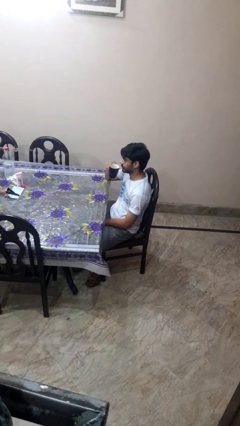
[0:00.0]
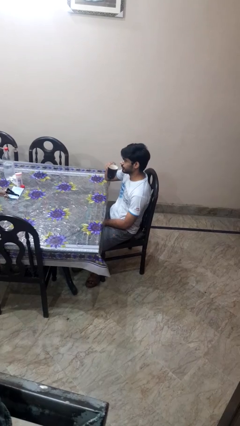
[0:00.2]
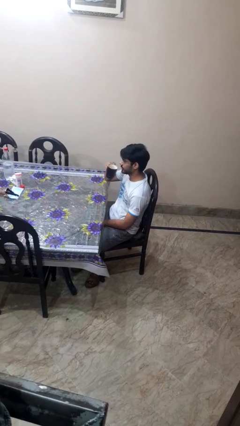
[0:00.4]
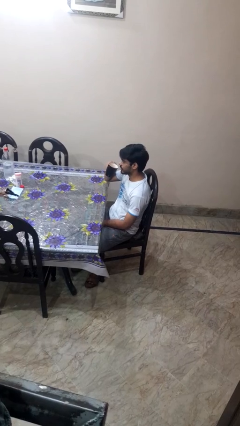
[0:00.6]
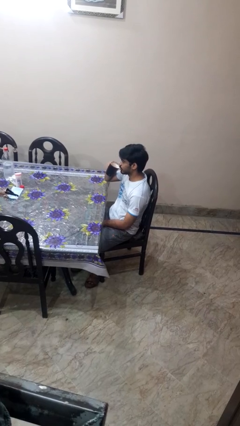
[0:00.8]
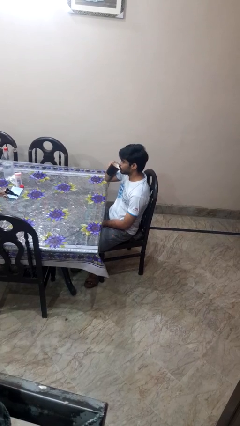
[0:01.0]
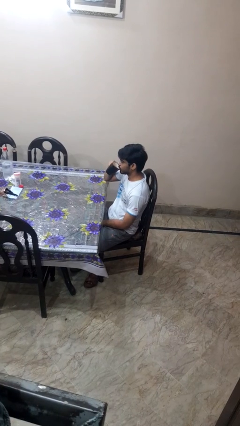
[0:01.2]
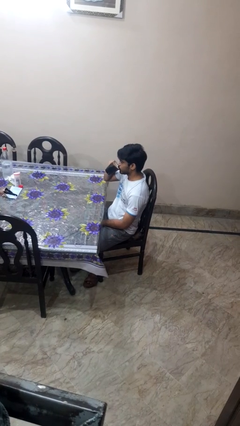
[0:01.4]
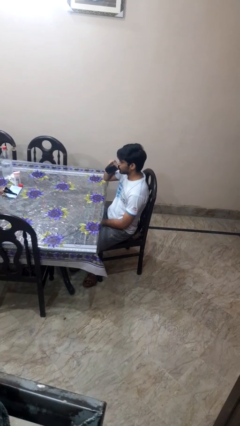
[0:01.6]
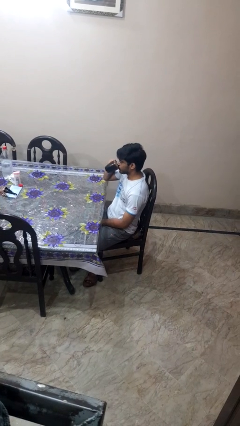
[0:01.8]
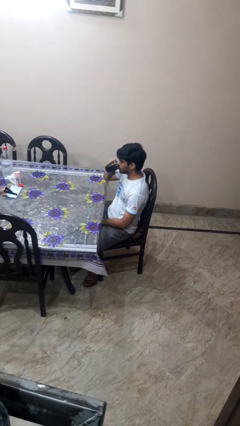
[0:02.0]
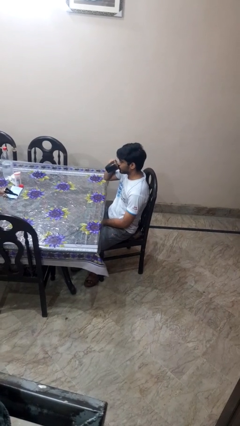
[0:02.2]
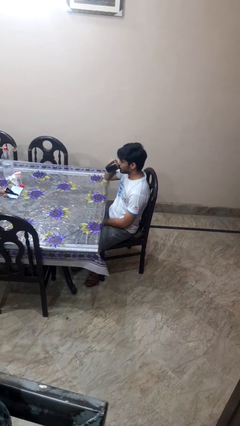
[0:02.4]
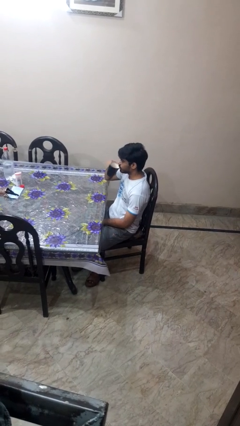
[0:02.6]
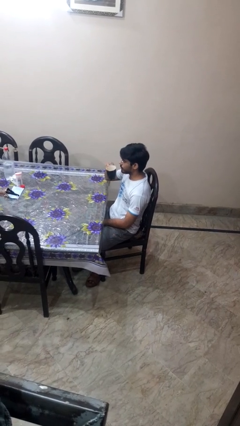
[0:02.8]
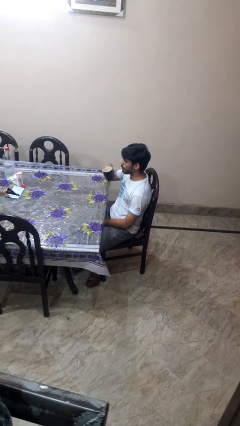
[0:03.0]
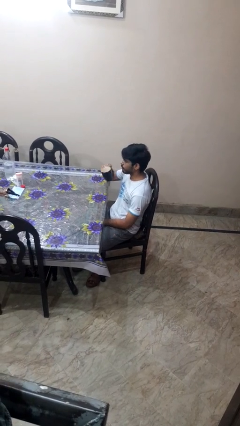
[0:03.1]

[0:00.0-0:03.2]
person drinks from mug

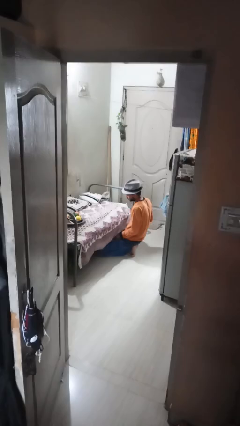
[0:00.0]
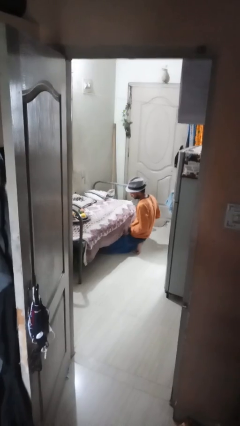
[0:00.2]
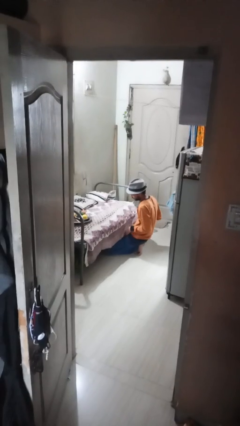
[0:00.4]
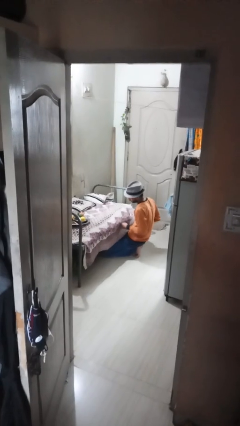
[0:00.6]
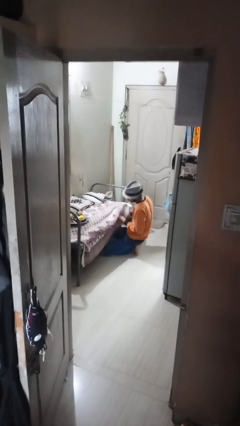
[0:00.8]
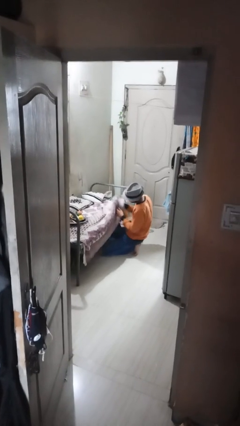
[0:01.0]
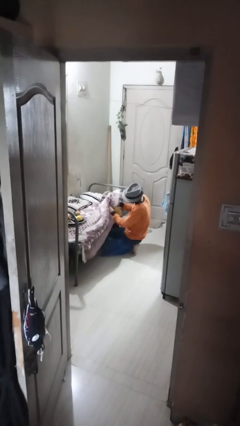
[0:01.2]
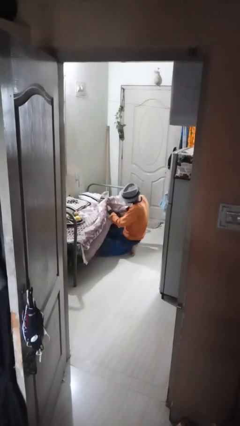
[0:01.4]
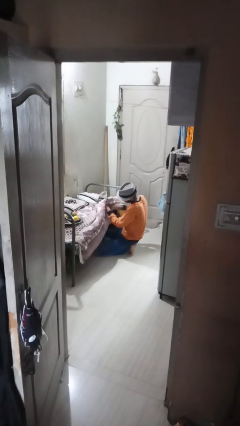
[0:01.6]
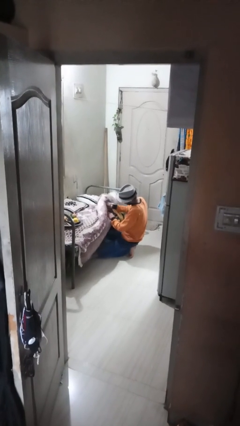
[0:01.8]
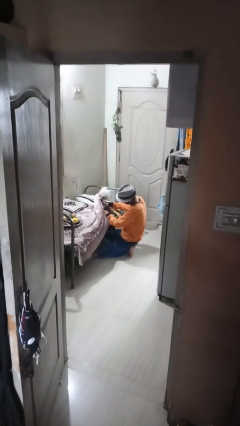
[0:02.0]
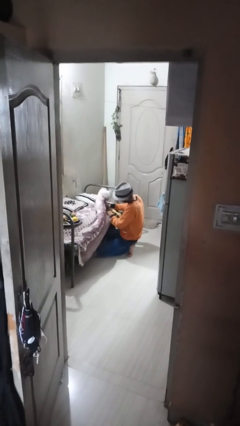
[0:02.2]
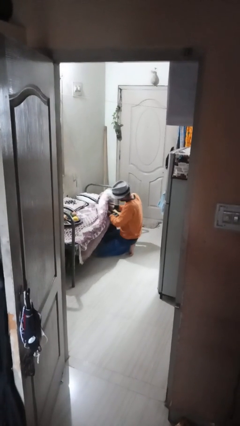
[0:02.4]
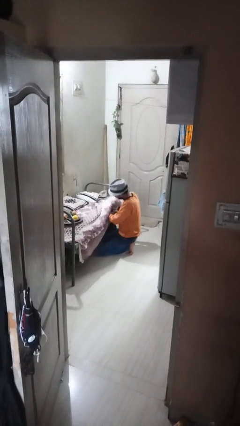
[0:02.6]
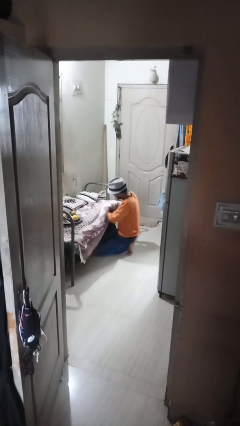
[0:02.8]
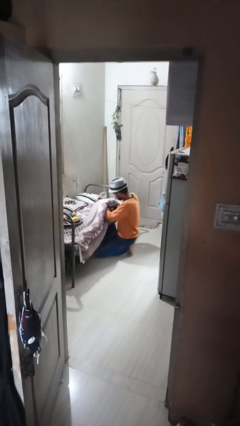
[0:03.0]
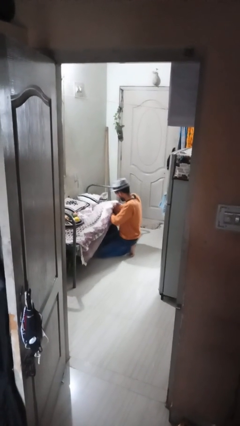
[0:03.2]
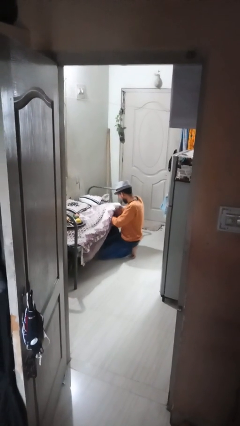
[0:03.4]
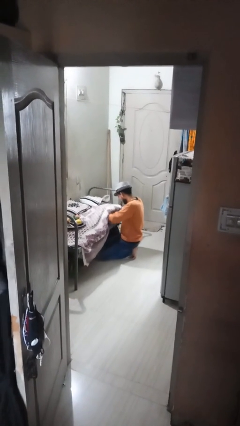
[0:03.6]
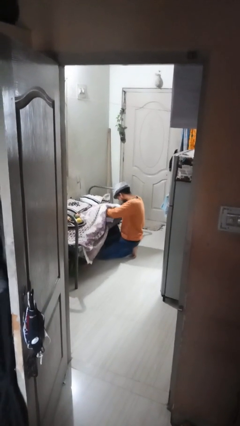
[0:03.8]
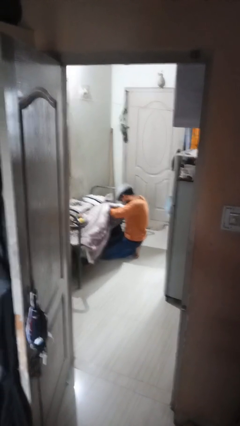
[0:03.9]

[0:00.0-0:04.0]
person searches under couch

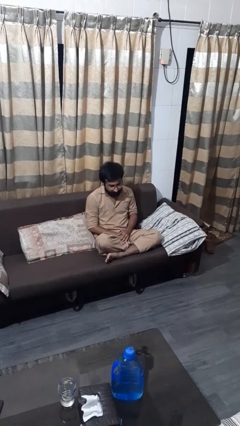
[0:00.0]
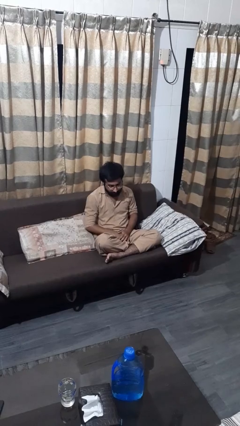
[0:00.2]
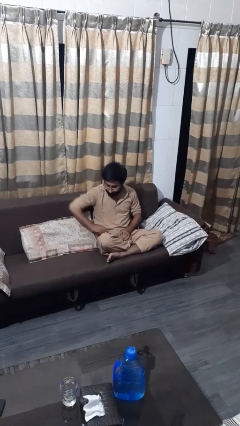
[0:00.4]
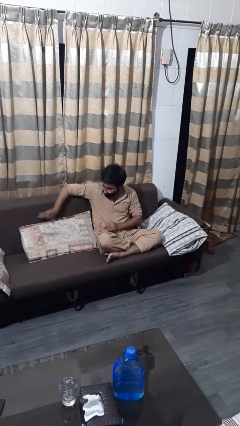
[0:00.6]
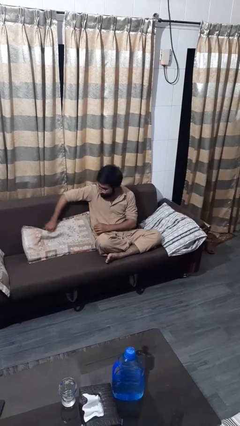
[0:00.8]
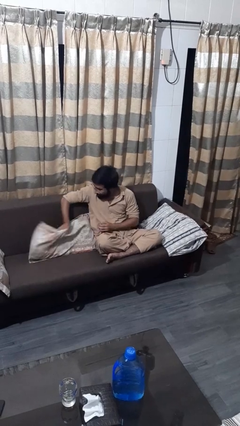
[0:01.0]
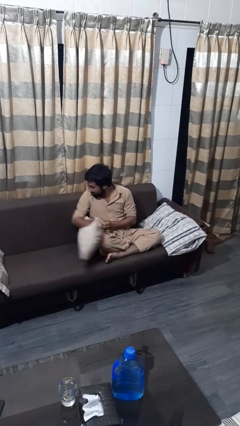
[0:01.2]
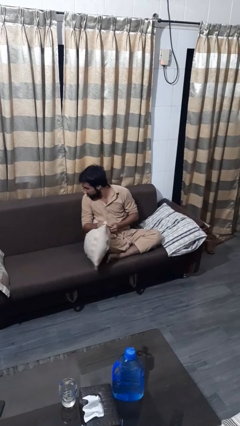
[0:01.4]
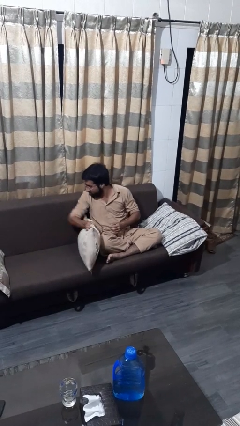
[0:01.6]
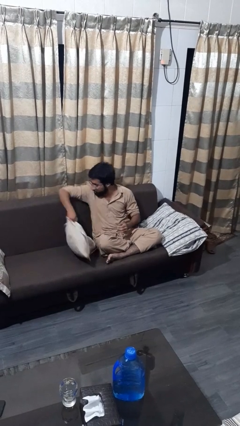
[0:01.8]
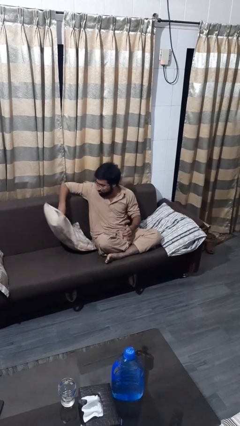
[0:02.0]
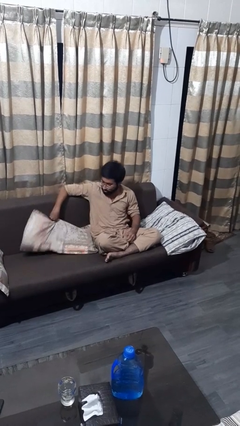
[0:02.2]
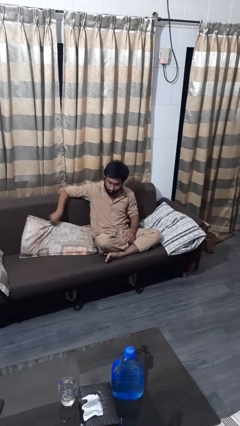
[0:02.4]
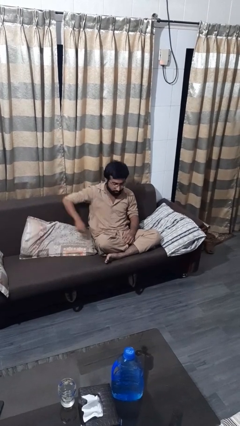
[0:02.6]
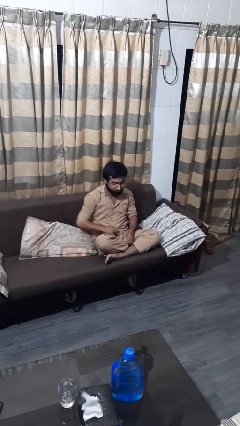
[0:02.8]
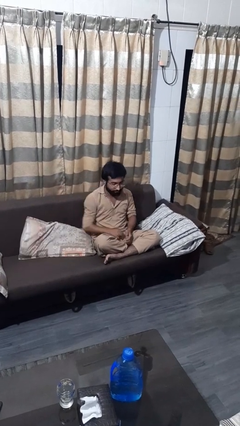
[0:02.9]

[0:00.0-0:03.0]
person searches in couch

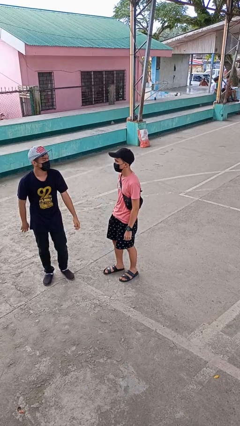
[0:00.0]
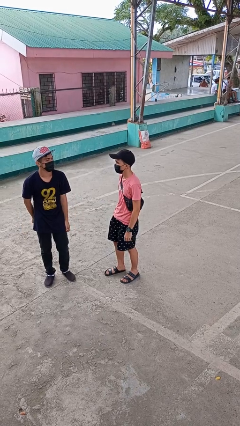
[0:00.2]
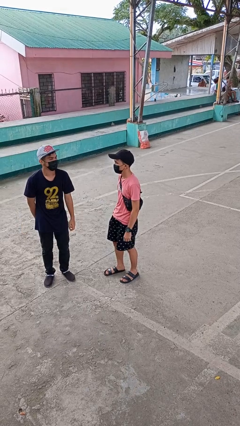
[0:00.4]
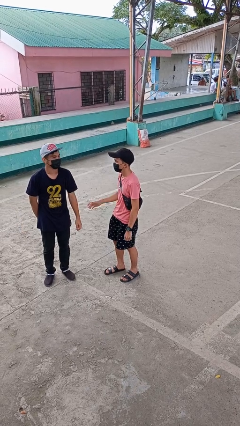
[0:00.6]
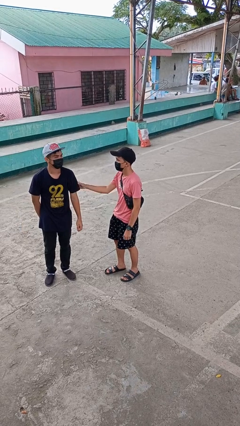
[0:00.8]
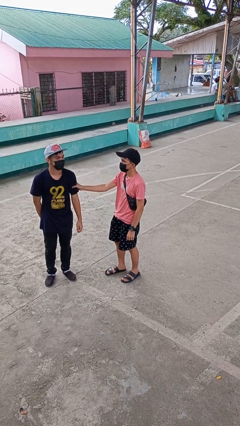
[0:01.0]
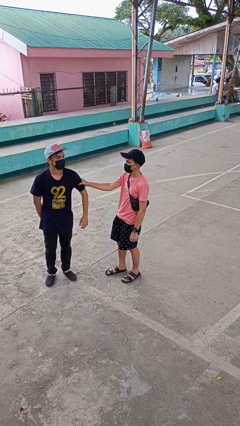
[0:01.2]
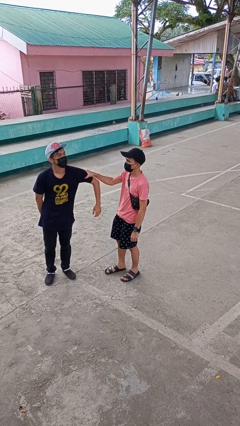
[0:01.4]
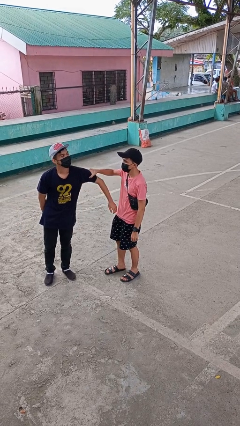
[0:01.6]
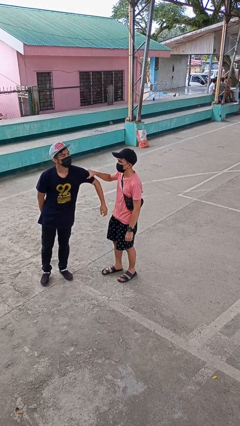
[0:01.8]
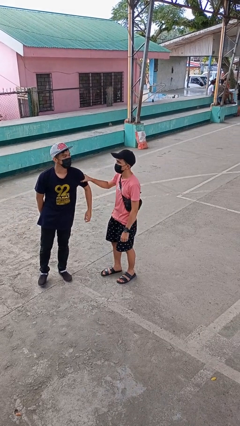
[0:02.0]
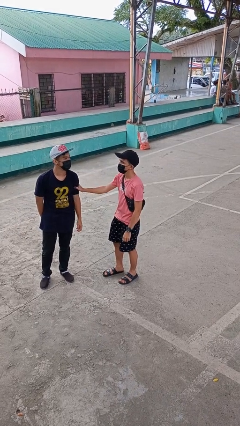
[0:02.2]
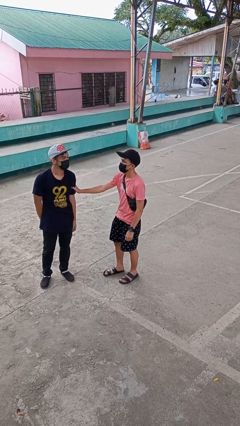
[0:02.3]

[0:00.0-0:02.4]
person grabs person by bicep

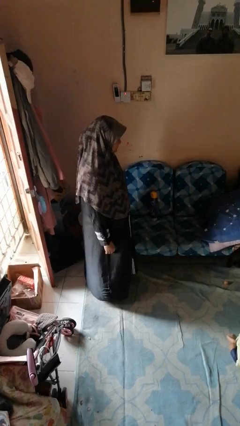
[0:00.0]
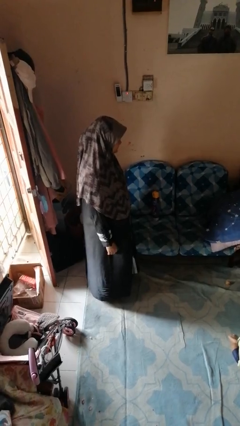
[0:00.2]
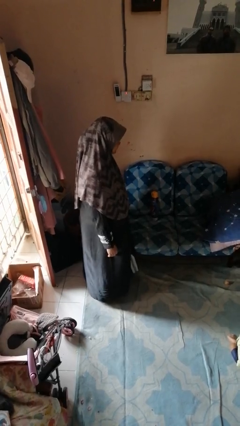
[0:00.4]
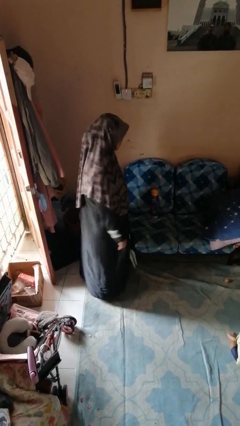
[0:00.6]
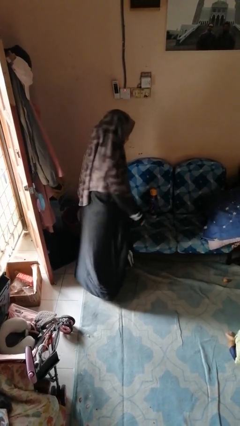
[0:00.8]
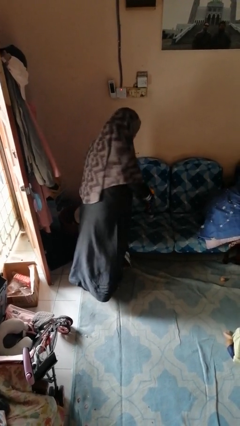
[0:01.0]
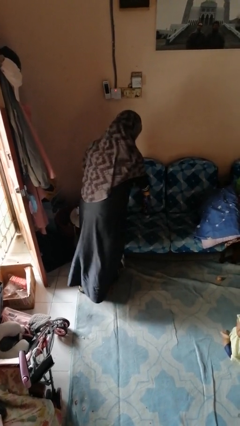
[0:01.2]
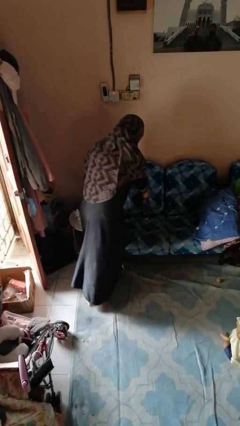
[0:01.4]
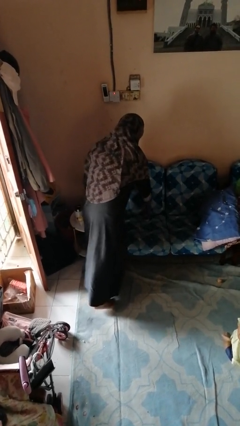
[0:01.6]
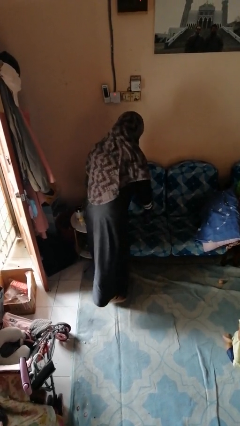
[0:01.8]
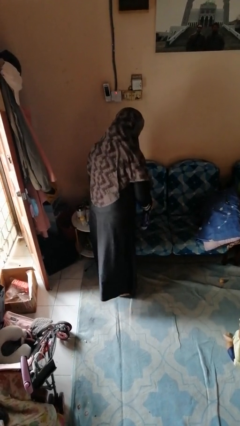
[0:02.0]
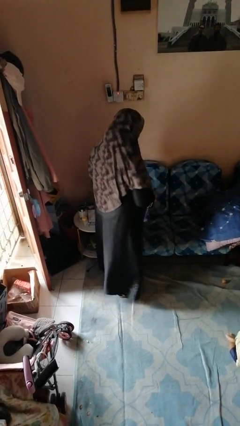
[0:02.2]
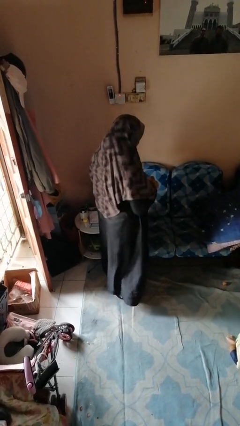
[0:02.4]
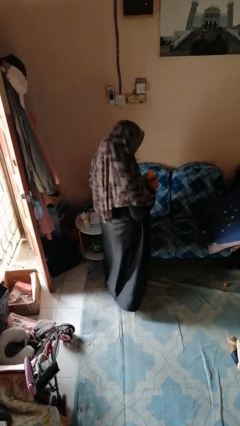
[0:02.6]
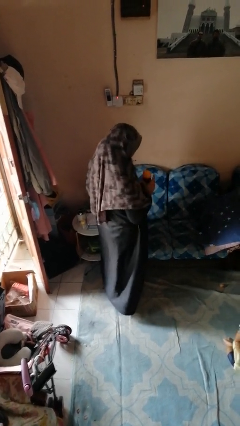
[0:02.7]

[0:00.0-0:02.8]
person picks up object from couch

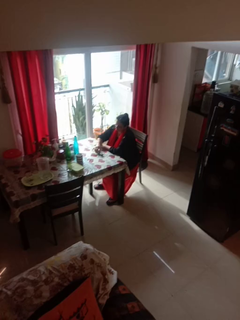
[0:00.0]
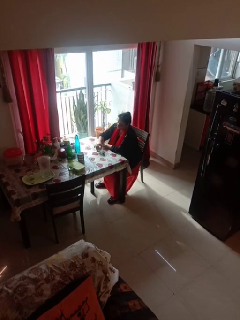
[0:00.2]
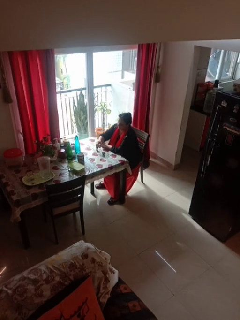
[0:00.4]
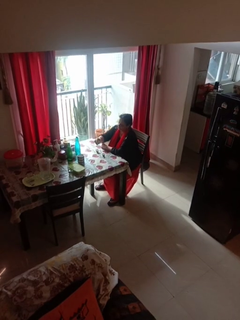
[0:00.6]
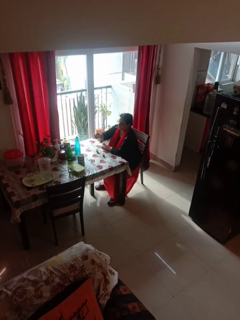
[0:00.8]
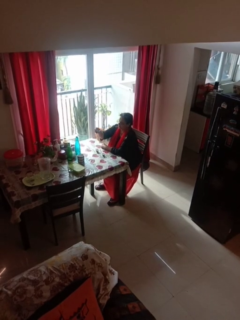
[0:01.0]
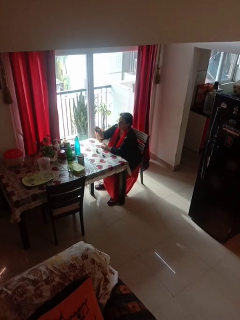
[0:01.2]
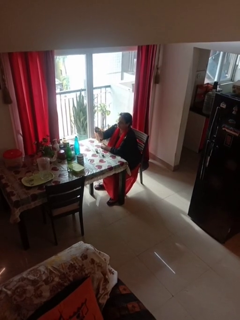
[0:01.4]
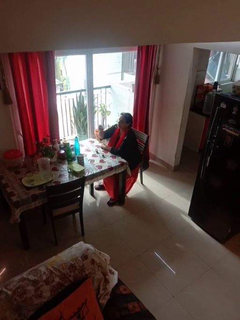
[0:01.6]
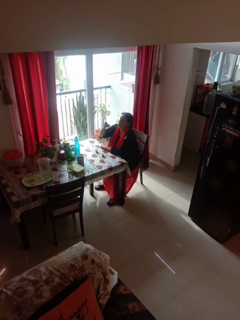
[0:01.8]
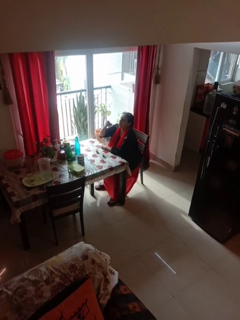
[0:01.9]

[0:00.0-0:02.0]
person picks up object from table

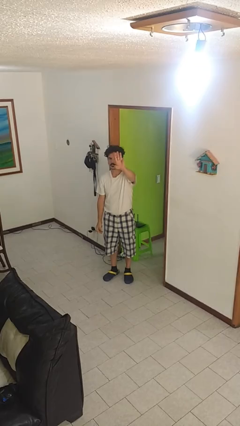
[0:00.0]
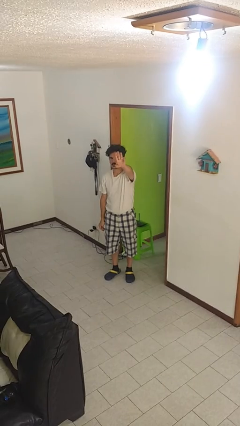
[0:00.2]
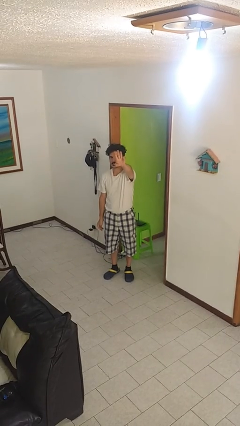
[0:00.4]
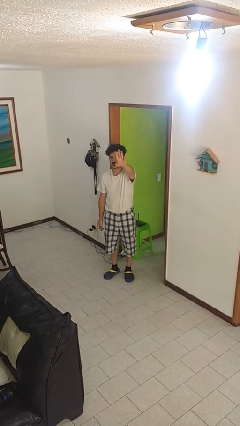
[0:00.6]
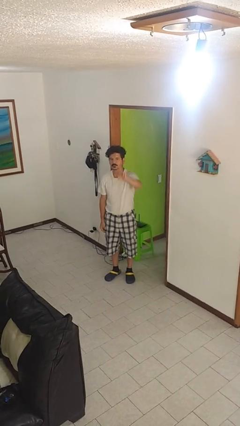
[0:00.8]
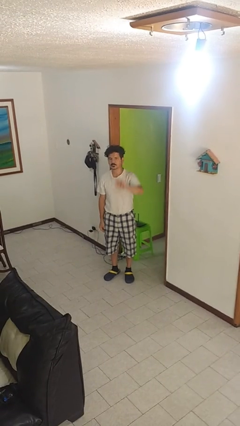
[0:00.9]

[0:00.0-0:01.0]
person gestures number three
